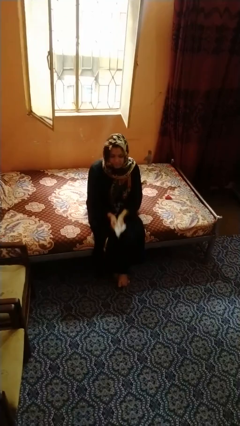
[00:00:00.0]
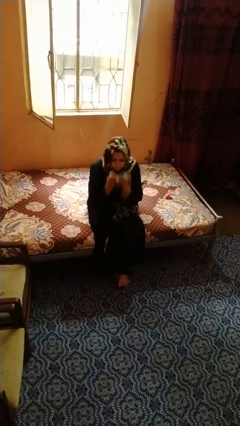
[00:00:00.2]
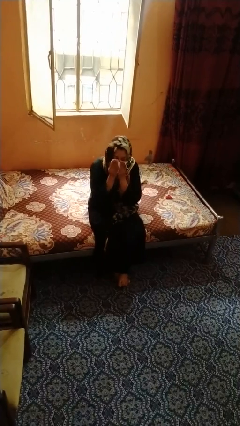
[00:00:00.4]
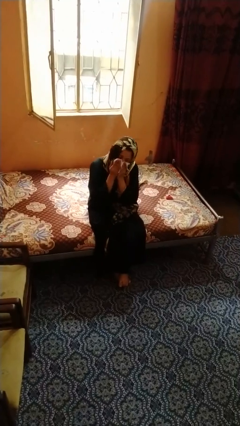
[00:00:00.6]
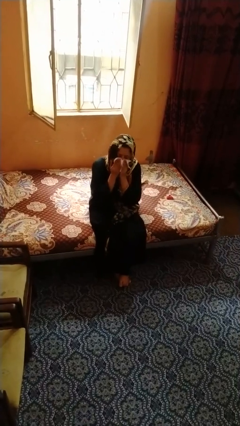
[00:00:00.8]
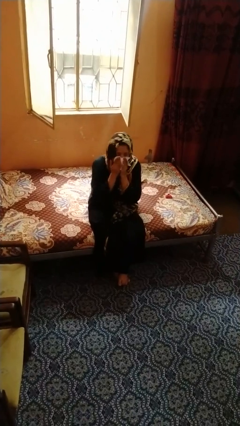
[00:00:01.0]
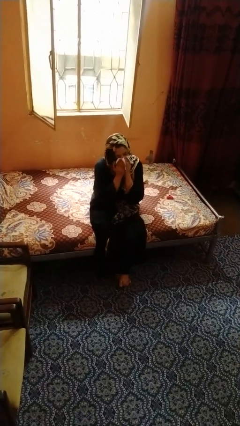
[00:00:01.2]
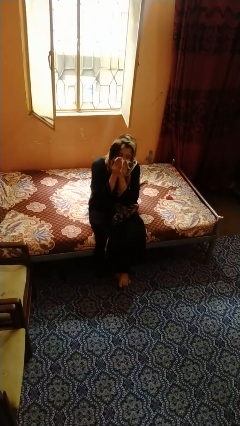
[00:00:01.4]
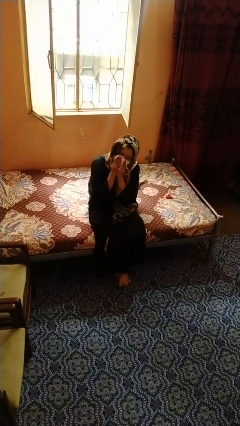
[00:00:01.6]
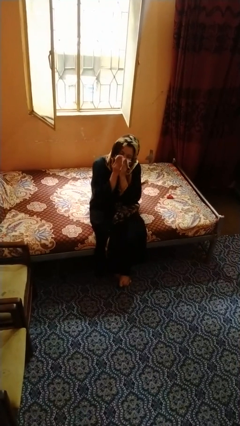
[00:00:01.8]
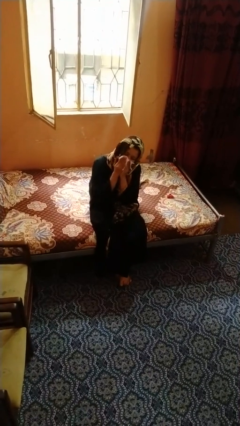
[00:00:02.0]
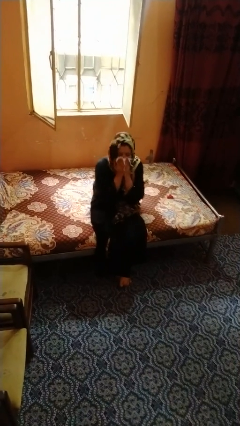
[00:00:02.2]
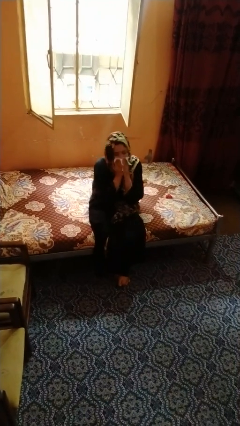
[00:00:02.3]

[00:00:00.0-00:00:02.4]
person blows nose

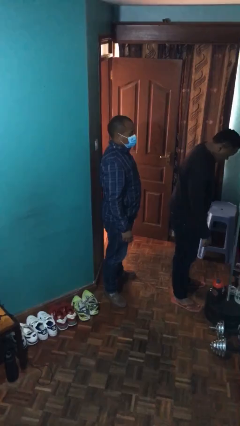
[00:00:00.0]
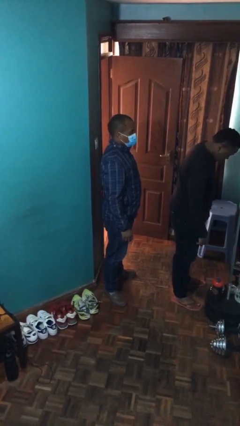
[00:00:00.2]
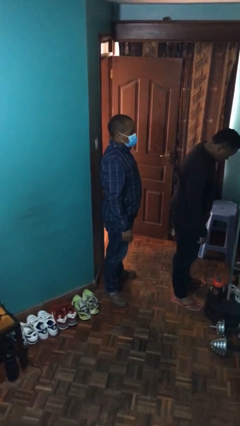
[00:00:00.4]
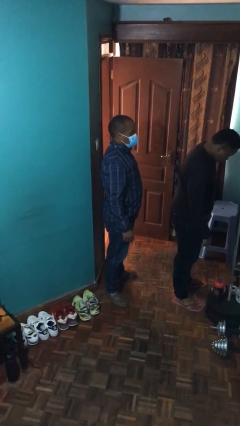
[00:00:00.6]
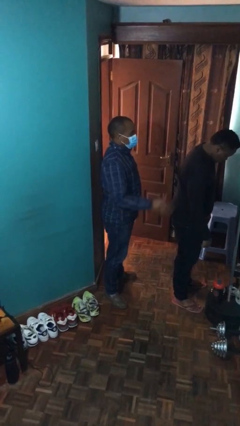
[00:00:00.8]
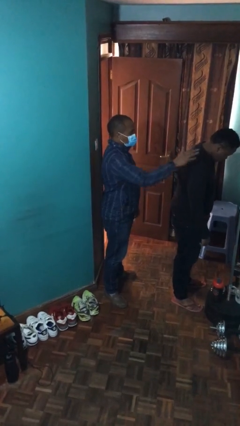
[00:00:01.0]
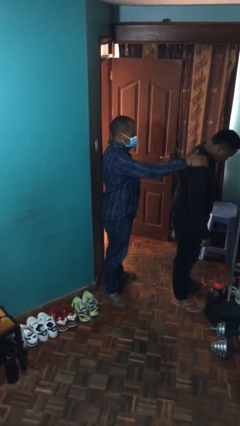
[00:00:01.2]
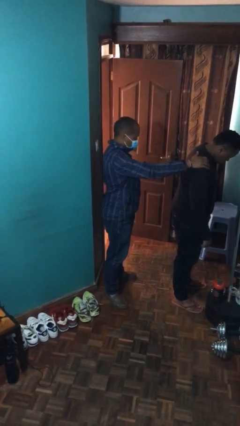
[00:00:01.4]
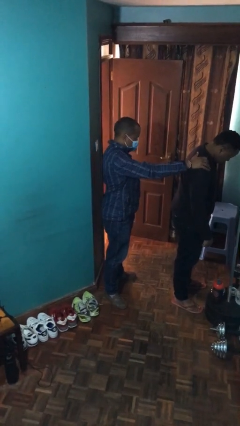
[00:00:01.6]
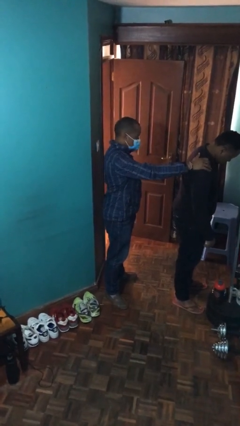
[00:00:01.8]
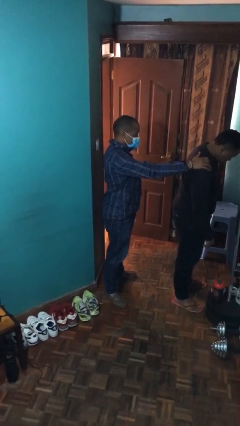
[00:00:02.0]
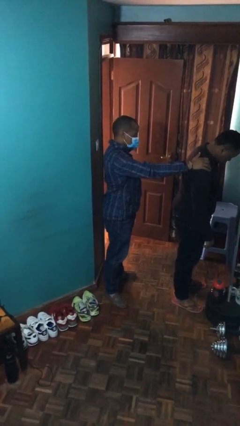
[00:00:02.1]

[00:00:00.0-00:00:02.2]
person grabs person by shoulder

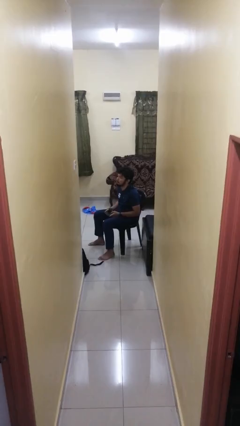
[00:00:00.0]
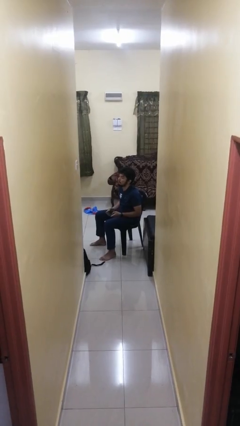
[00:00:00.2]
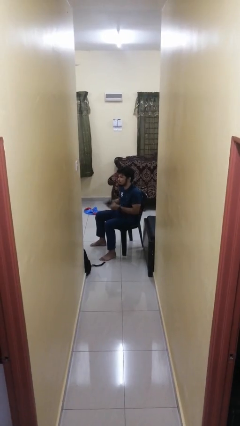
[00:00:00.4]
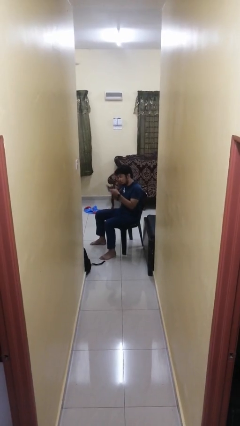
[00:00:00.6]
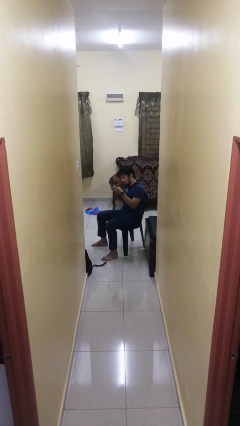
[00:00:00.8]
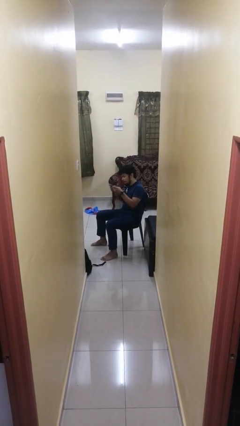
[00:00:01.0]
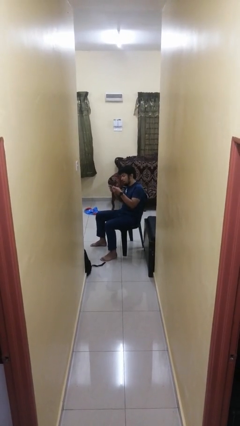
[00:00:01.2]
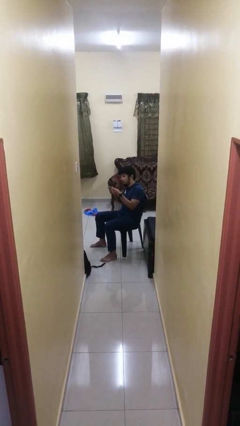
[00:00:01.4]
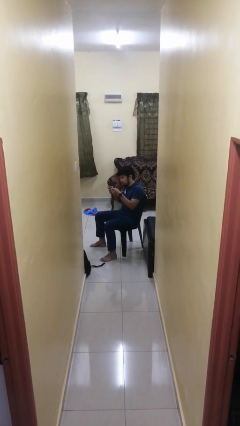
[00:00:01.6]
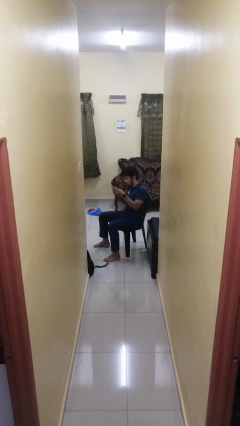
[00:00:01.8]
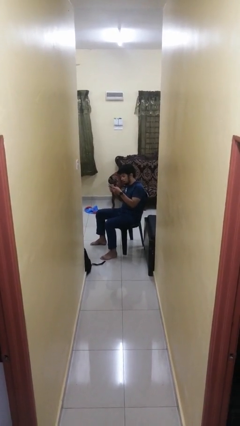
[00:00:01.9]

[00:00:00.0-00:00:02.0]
person interacts with handheld game

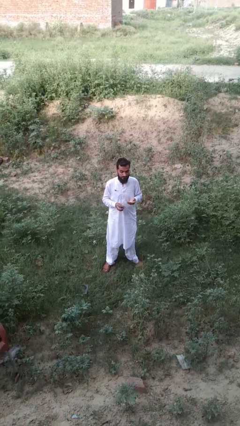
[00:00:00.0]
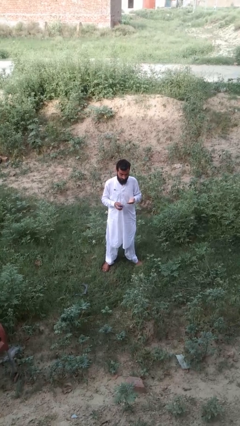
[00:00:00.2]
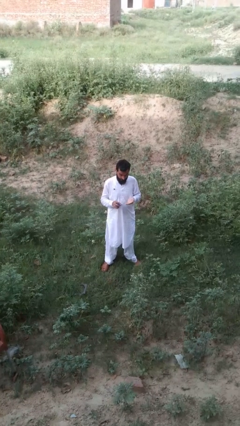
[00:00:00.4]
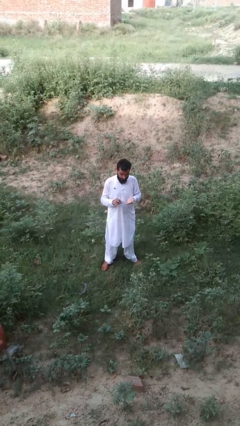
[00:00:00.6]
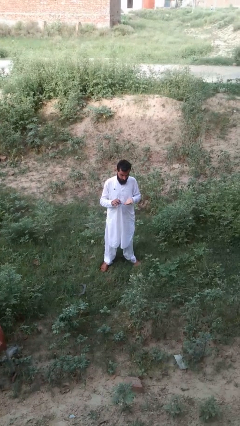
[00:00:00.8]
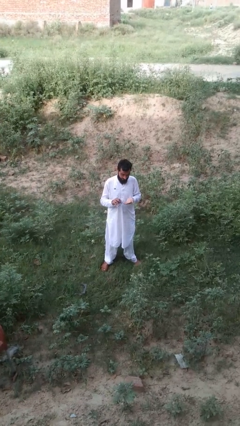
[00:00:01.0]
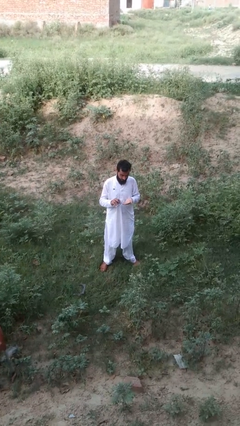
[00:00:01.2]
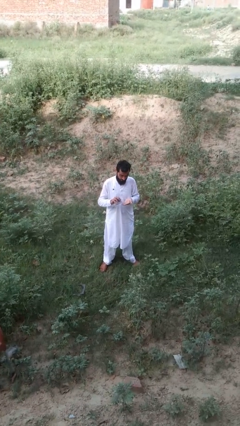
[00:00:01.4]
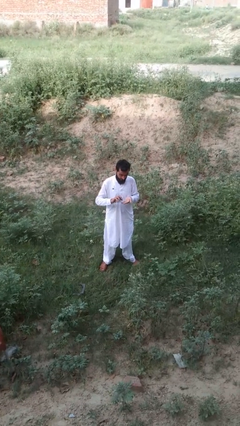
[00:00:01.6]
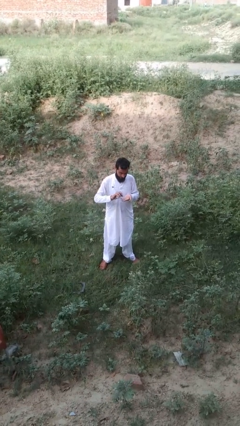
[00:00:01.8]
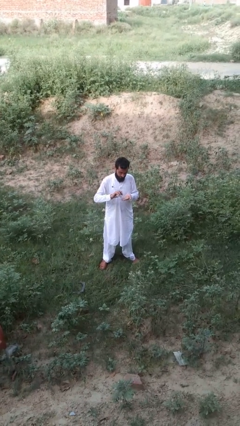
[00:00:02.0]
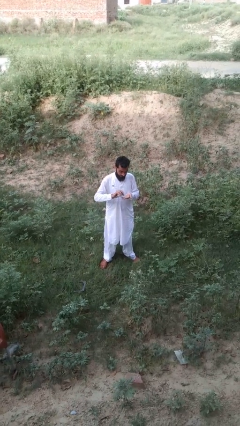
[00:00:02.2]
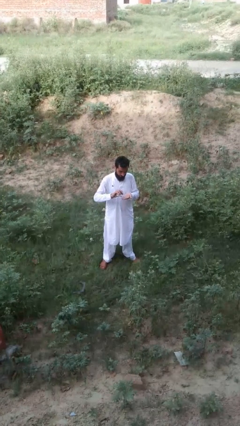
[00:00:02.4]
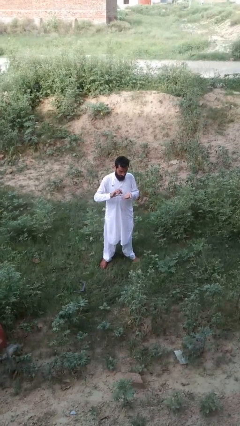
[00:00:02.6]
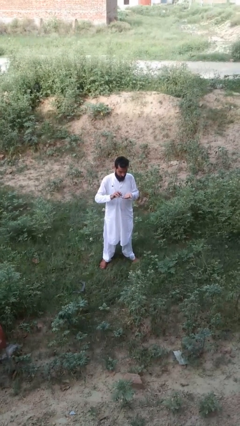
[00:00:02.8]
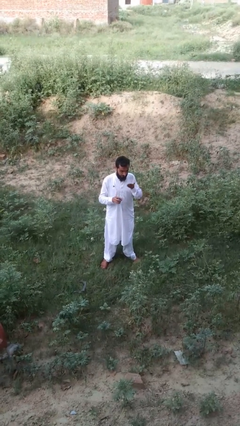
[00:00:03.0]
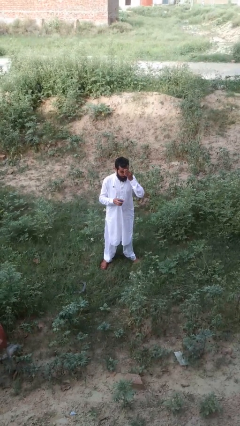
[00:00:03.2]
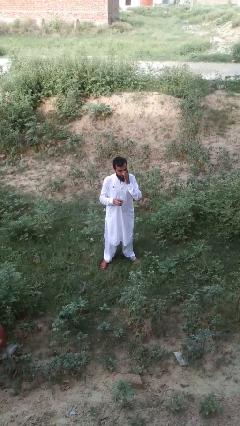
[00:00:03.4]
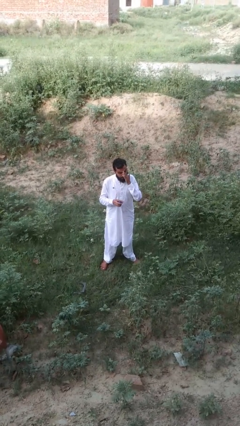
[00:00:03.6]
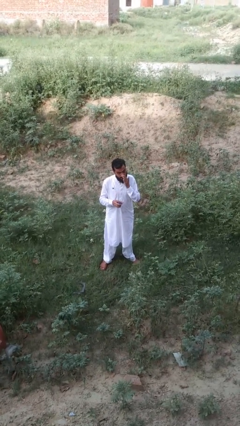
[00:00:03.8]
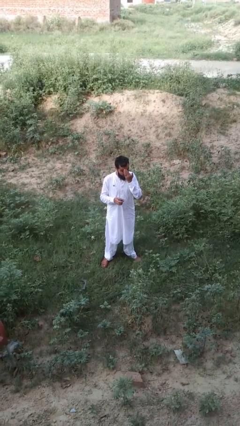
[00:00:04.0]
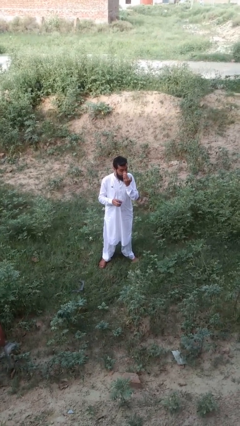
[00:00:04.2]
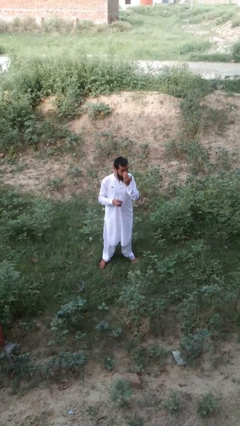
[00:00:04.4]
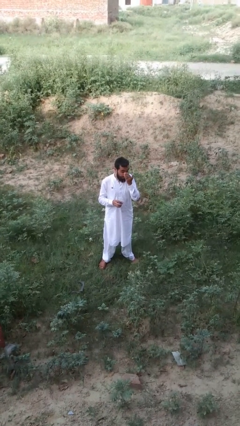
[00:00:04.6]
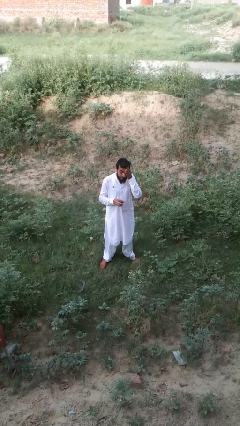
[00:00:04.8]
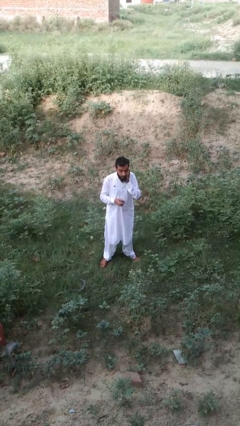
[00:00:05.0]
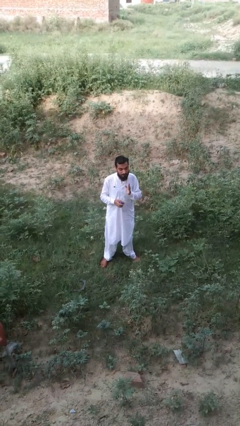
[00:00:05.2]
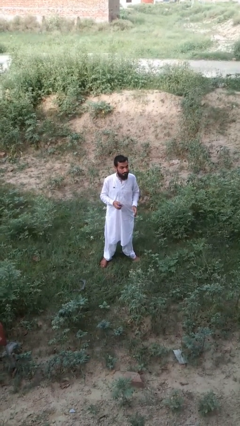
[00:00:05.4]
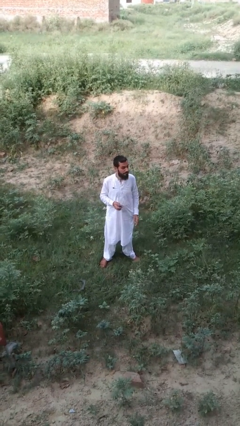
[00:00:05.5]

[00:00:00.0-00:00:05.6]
person applies sunscreen

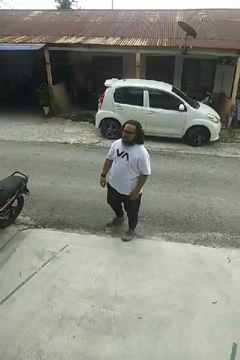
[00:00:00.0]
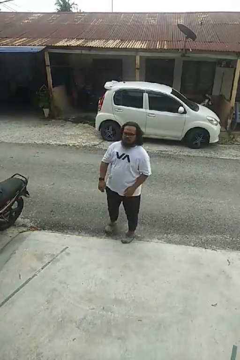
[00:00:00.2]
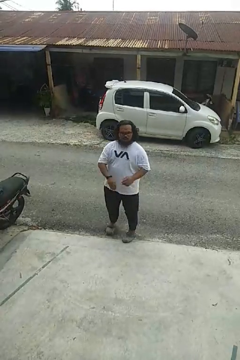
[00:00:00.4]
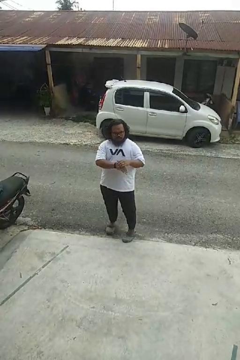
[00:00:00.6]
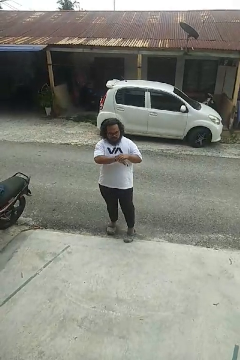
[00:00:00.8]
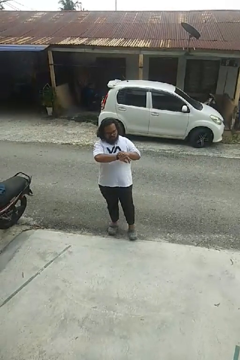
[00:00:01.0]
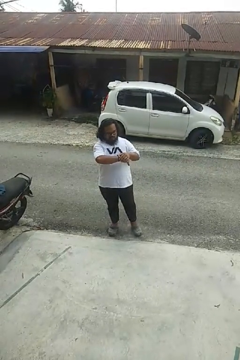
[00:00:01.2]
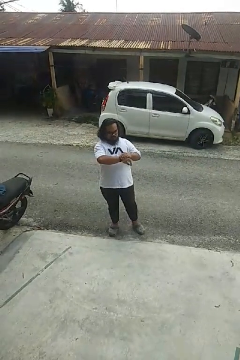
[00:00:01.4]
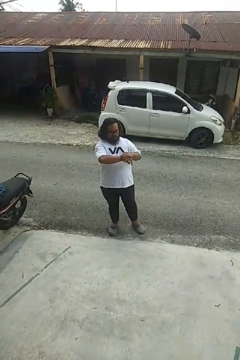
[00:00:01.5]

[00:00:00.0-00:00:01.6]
person looks at wristwatch

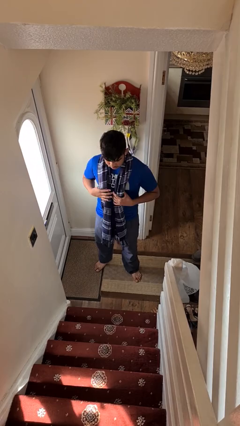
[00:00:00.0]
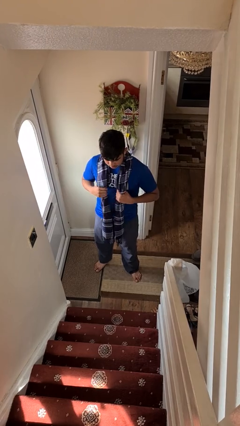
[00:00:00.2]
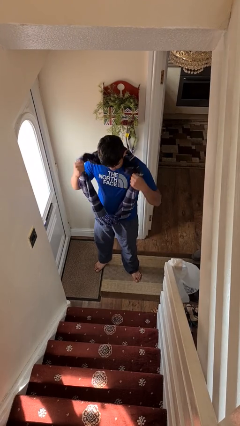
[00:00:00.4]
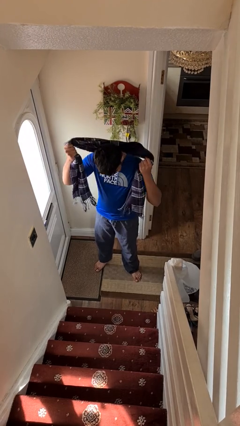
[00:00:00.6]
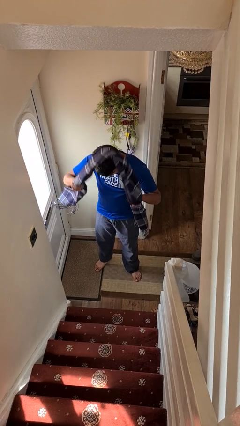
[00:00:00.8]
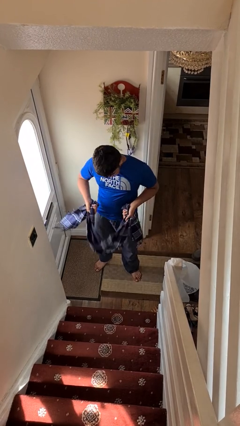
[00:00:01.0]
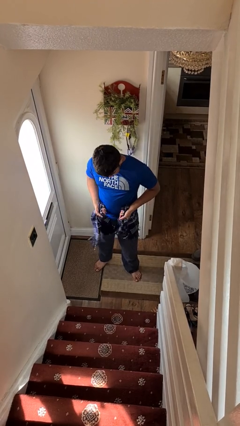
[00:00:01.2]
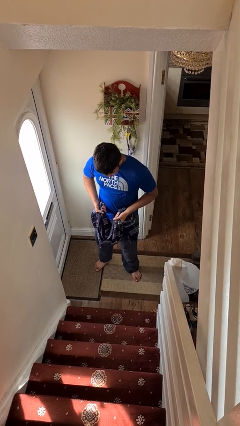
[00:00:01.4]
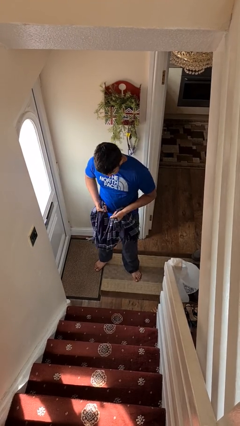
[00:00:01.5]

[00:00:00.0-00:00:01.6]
person takes off scarf

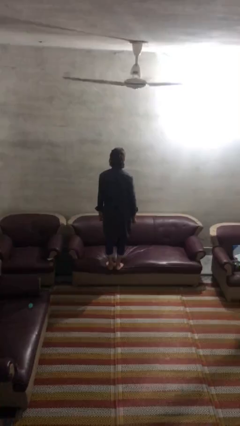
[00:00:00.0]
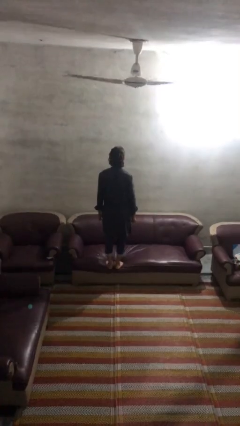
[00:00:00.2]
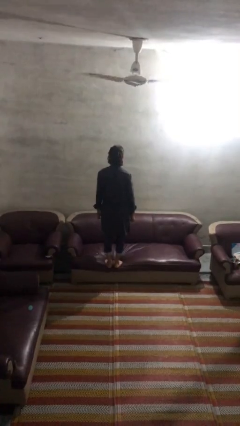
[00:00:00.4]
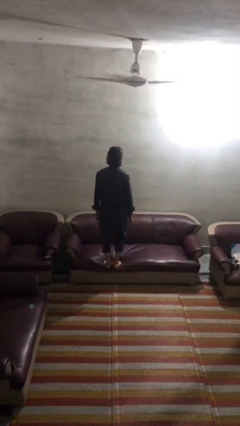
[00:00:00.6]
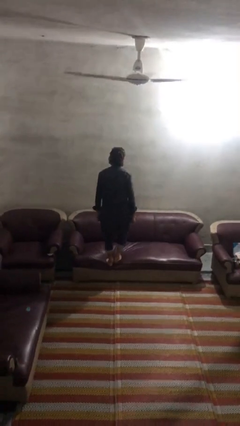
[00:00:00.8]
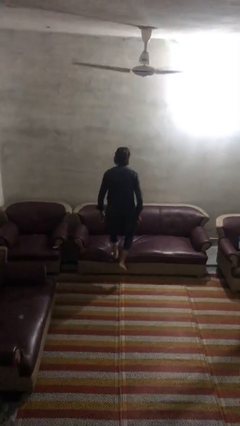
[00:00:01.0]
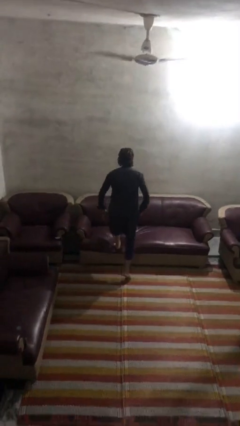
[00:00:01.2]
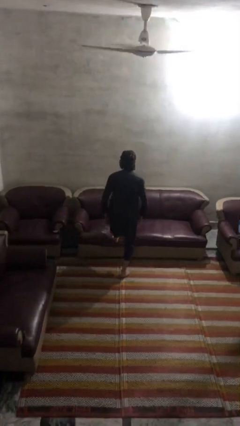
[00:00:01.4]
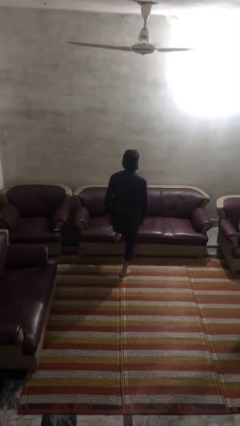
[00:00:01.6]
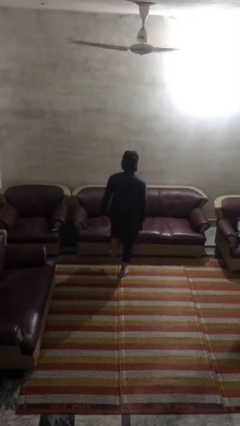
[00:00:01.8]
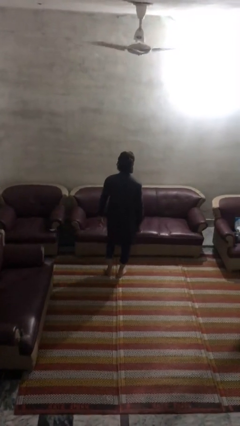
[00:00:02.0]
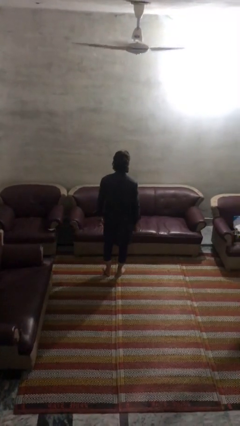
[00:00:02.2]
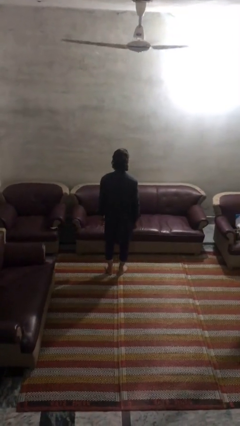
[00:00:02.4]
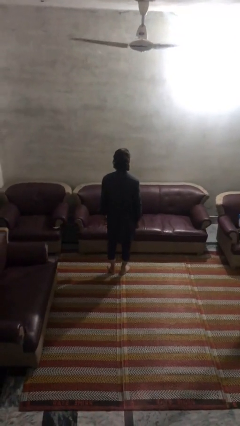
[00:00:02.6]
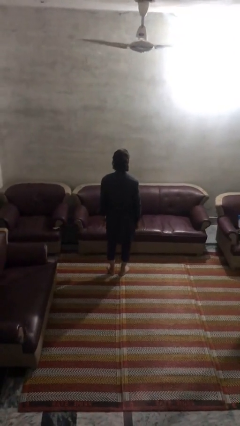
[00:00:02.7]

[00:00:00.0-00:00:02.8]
person climbs off couch
